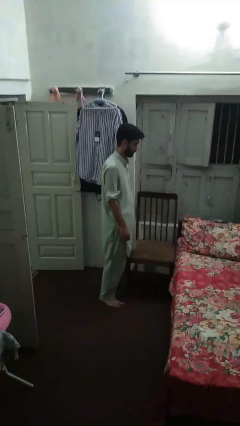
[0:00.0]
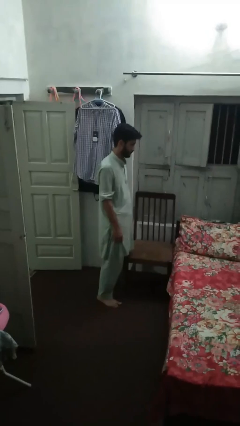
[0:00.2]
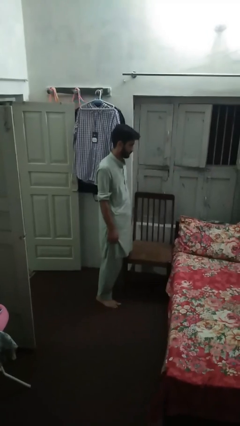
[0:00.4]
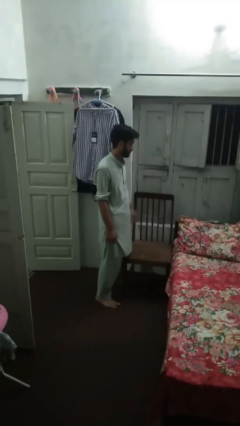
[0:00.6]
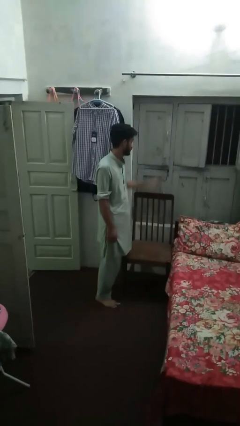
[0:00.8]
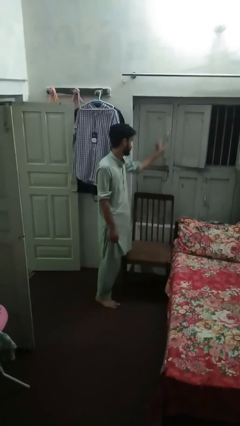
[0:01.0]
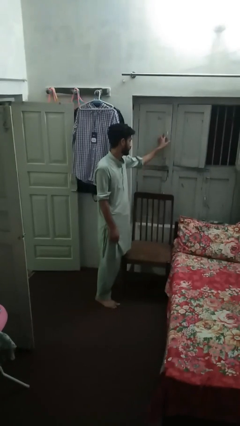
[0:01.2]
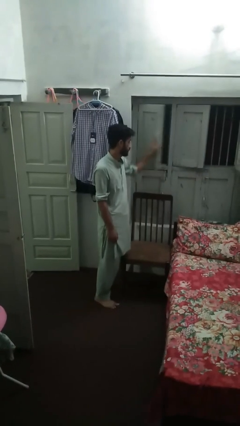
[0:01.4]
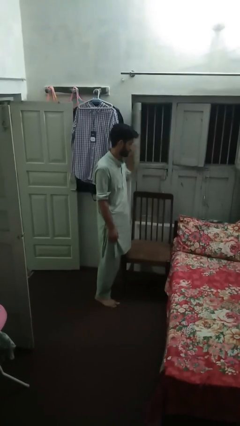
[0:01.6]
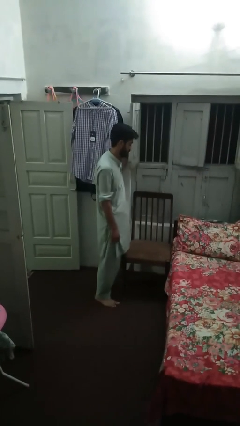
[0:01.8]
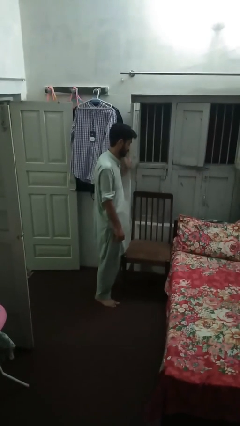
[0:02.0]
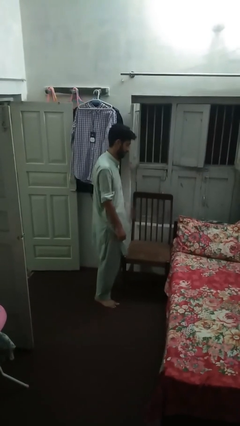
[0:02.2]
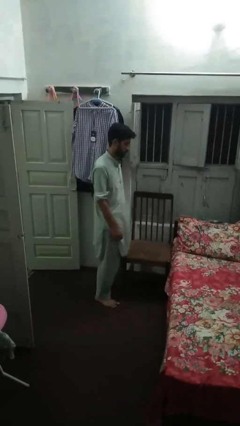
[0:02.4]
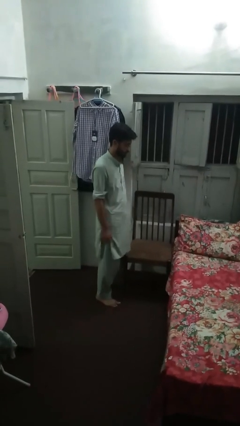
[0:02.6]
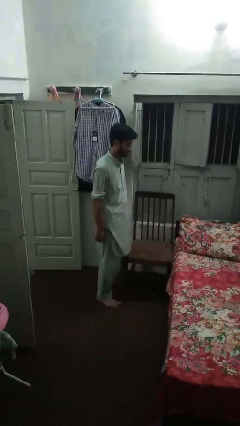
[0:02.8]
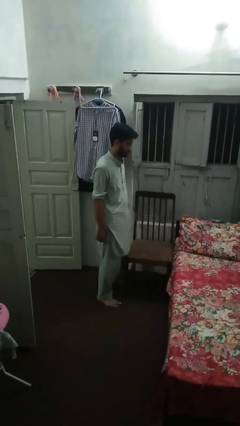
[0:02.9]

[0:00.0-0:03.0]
person opens home window

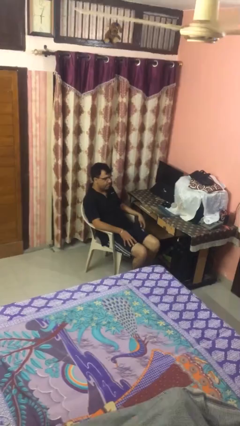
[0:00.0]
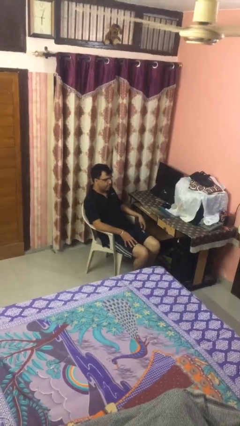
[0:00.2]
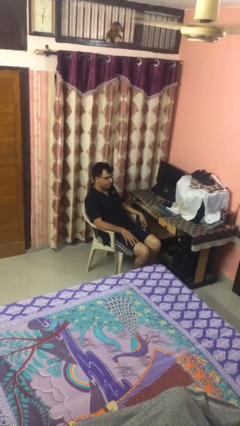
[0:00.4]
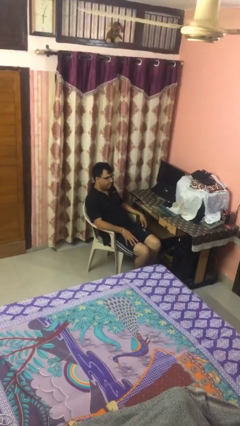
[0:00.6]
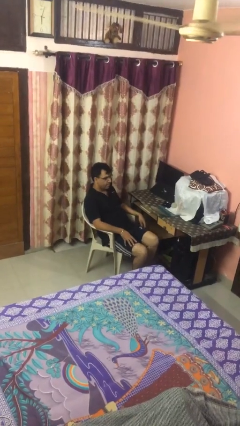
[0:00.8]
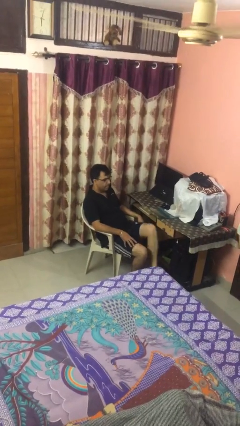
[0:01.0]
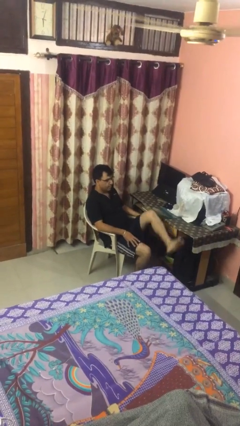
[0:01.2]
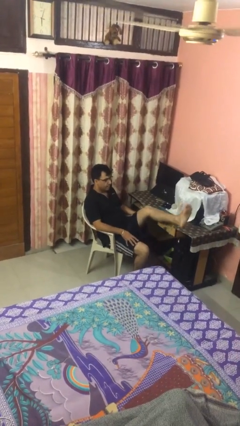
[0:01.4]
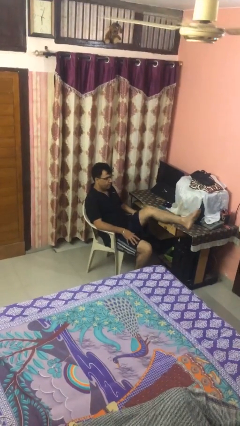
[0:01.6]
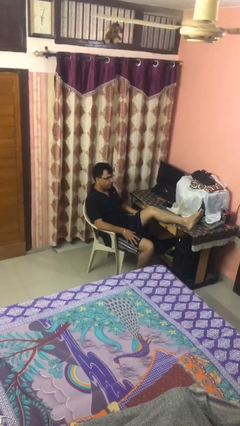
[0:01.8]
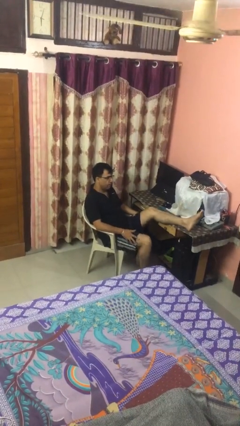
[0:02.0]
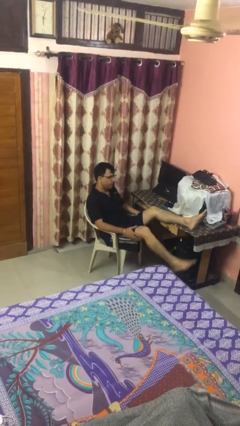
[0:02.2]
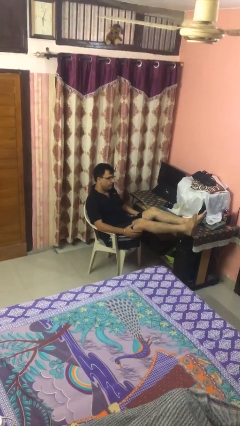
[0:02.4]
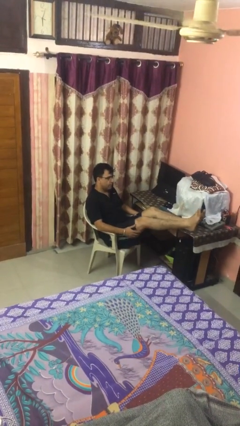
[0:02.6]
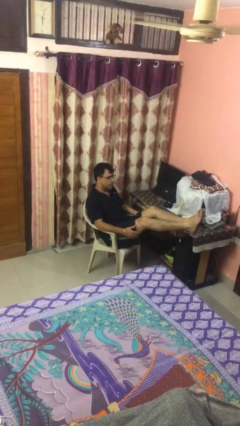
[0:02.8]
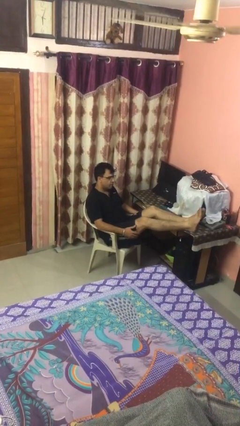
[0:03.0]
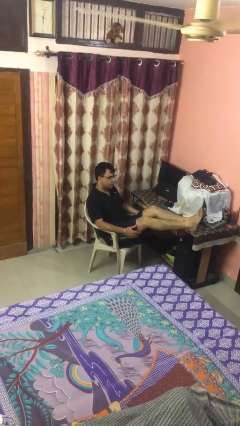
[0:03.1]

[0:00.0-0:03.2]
person puts feet up

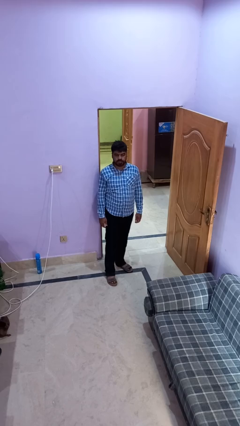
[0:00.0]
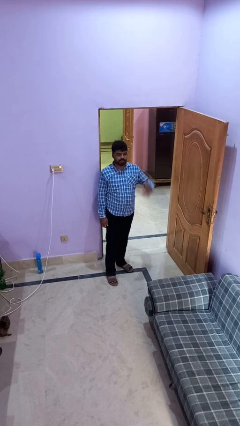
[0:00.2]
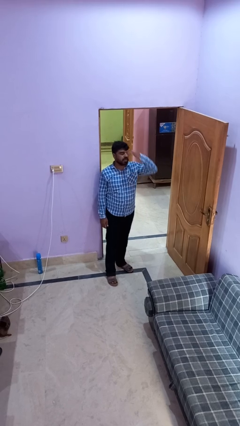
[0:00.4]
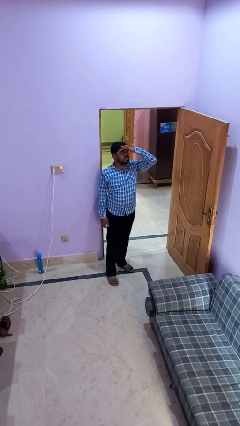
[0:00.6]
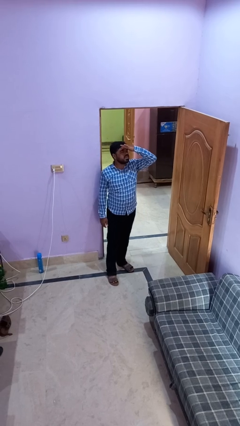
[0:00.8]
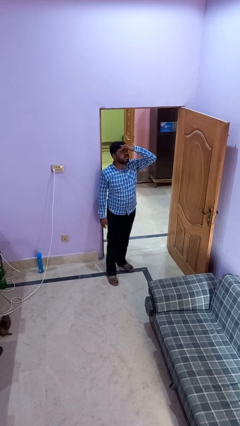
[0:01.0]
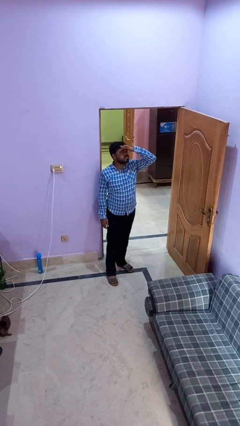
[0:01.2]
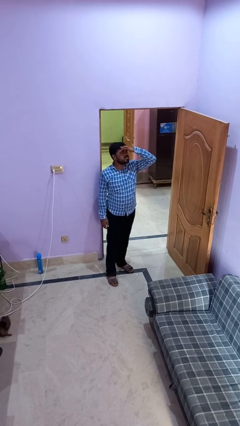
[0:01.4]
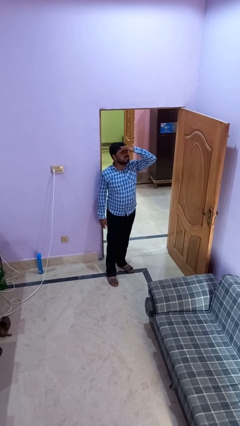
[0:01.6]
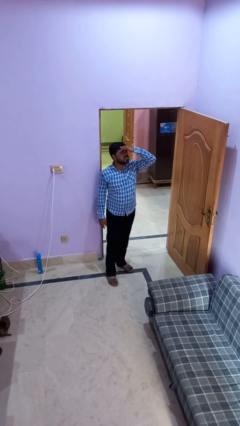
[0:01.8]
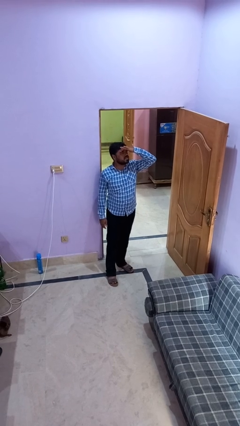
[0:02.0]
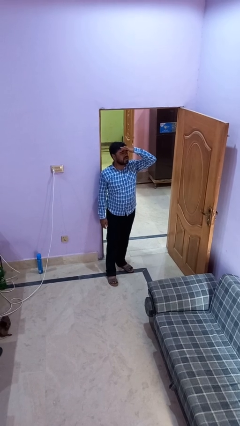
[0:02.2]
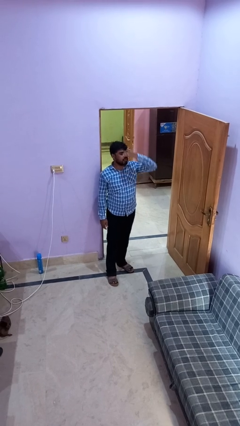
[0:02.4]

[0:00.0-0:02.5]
person shades eyes

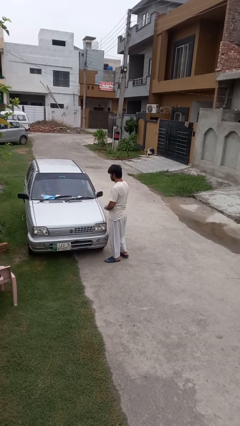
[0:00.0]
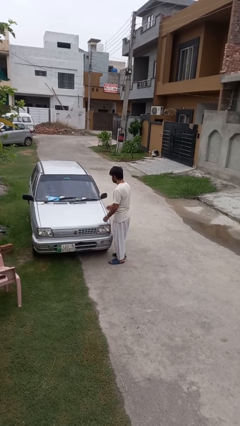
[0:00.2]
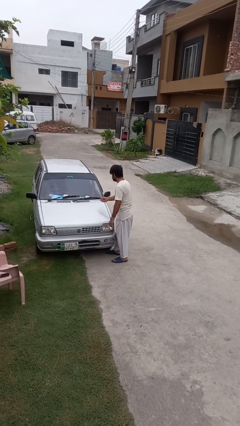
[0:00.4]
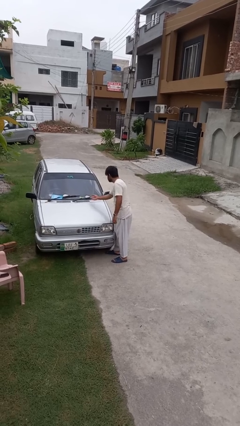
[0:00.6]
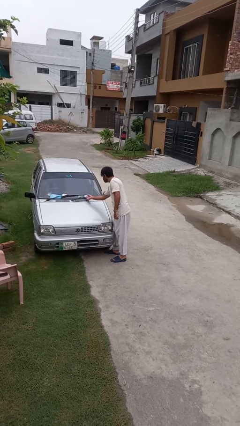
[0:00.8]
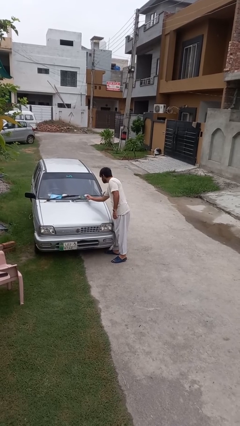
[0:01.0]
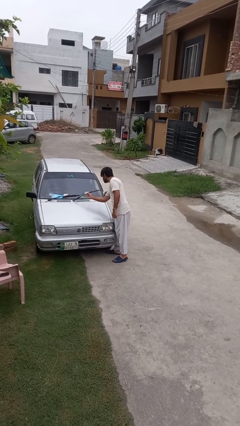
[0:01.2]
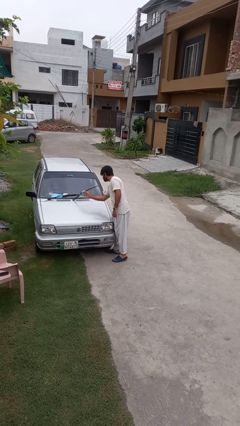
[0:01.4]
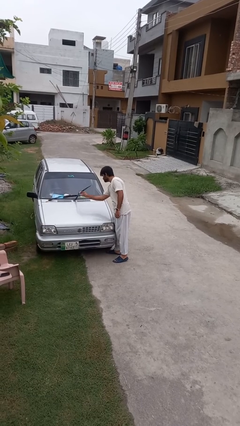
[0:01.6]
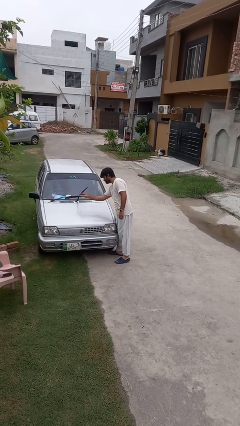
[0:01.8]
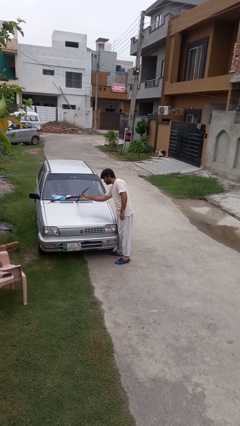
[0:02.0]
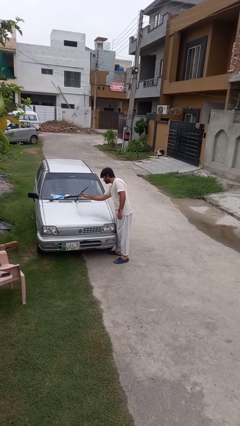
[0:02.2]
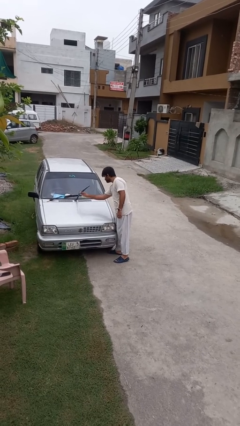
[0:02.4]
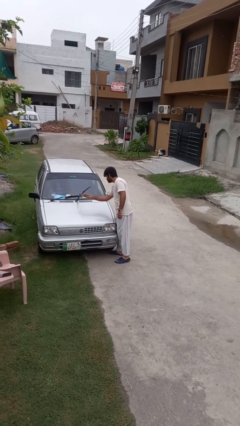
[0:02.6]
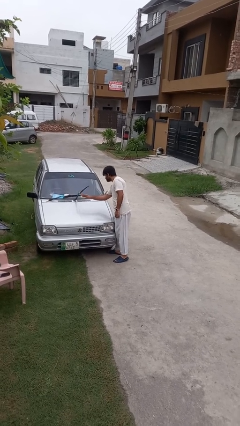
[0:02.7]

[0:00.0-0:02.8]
person flips up car wipers

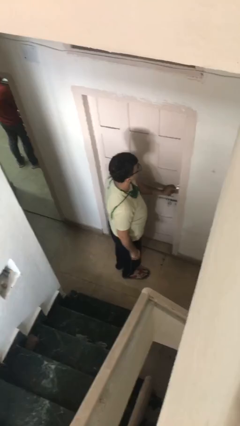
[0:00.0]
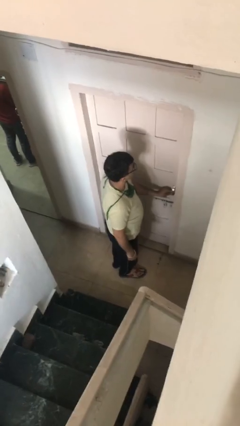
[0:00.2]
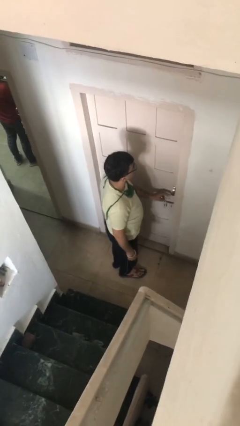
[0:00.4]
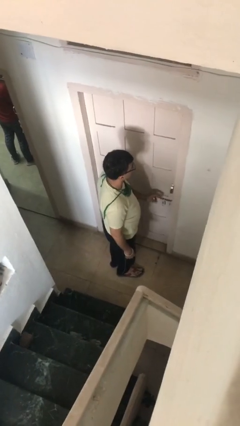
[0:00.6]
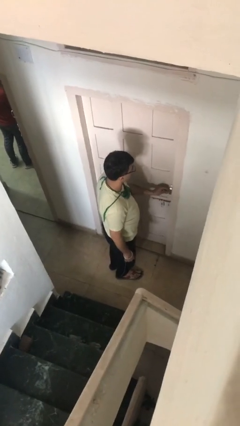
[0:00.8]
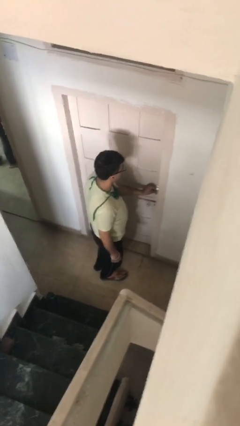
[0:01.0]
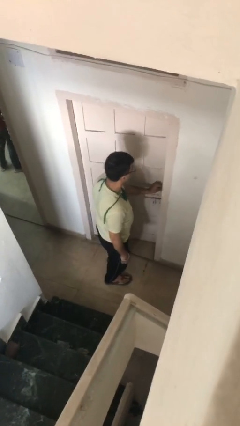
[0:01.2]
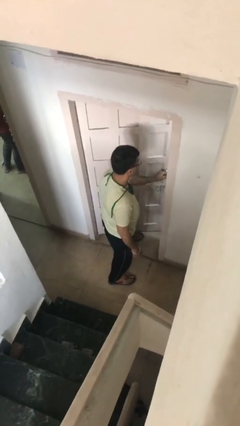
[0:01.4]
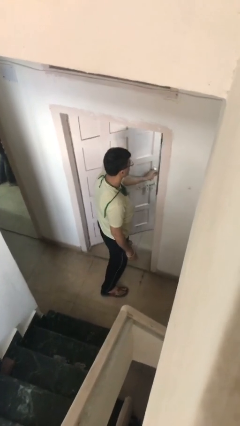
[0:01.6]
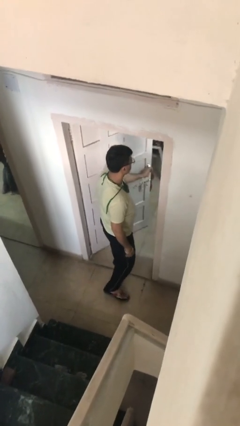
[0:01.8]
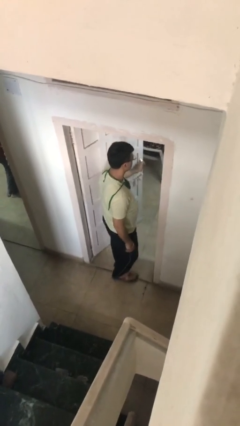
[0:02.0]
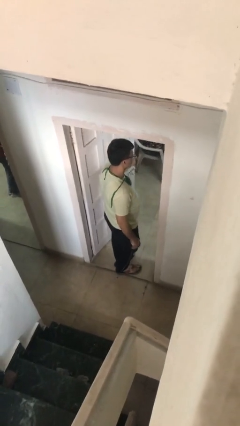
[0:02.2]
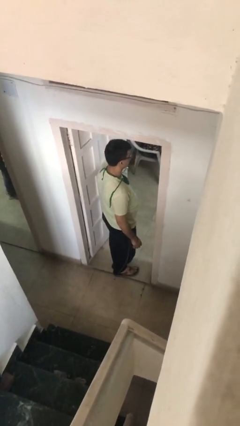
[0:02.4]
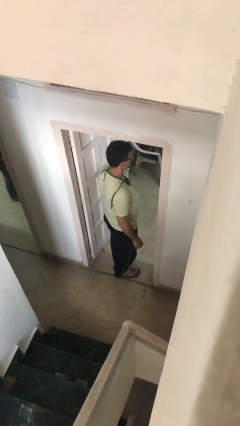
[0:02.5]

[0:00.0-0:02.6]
person opens facility door

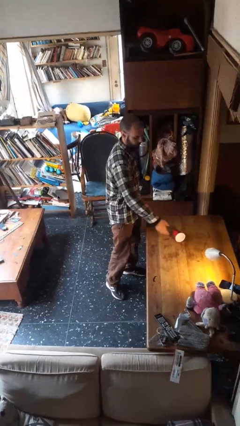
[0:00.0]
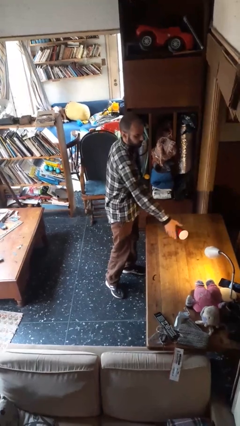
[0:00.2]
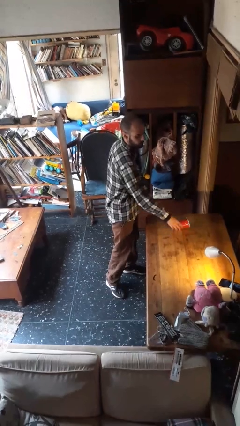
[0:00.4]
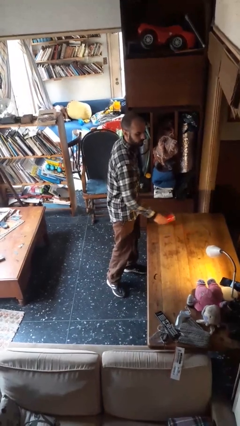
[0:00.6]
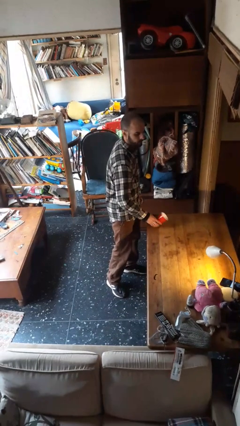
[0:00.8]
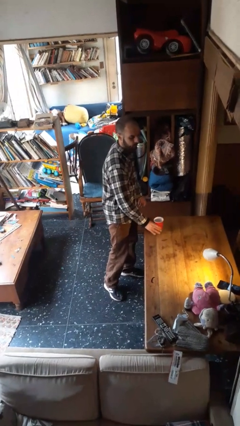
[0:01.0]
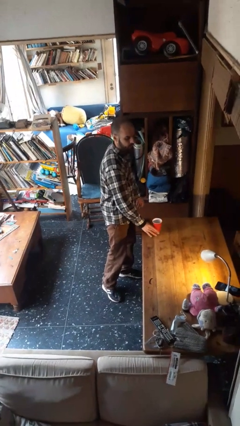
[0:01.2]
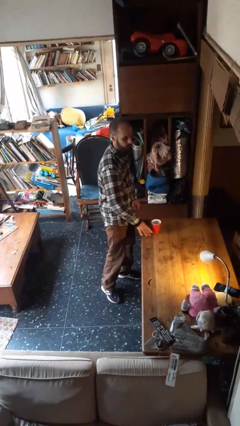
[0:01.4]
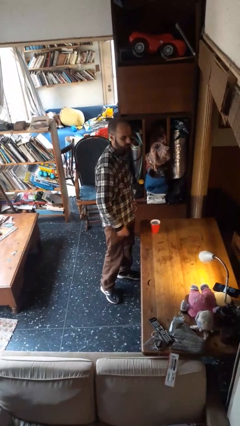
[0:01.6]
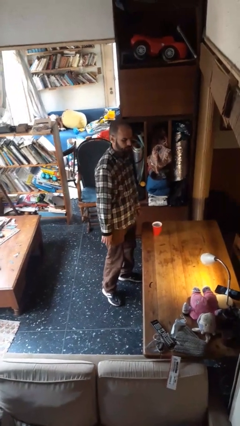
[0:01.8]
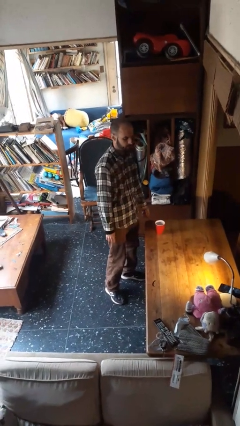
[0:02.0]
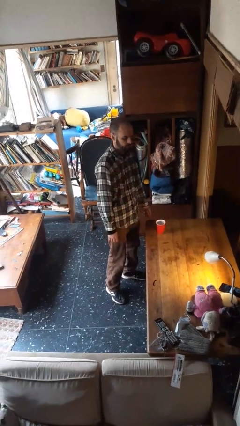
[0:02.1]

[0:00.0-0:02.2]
person sets upright glass

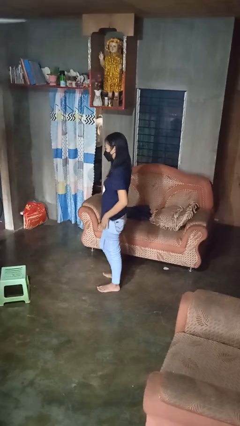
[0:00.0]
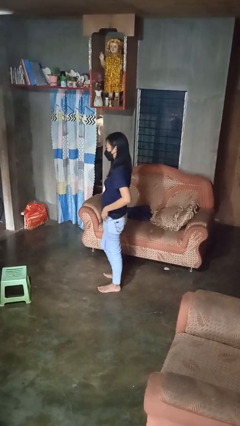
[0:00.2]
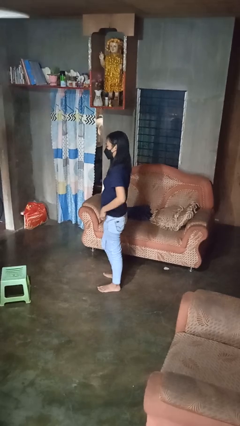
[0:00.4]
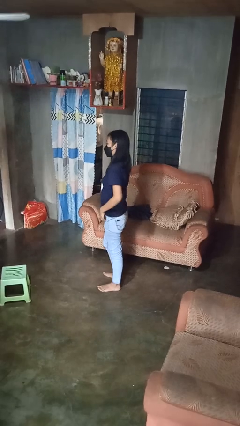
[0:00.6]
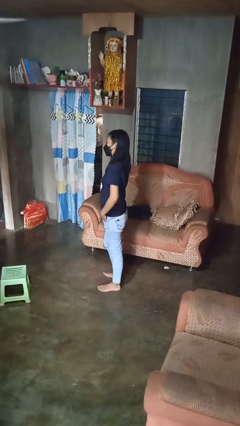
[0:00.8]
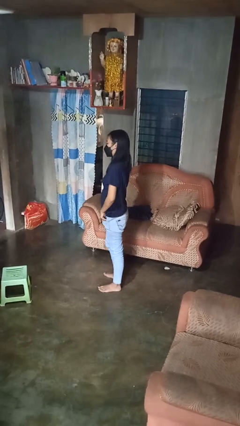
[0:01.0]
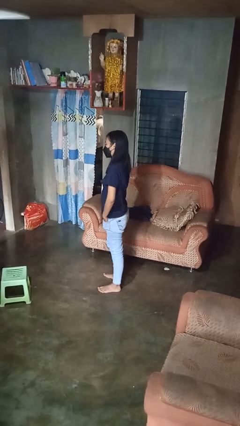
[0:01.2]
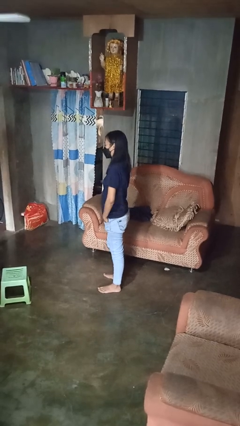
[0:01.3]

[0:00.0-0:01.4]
person puts hands in back pockets
